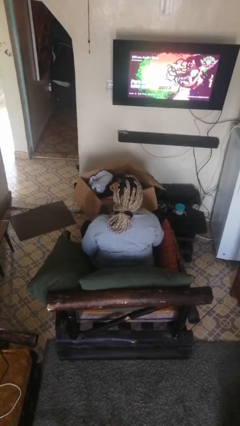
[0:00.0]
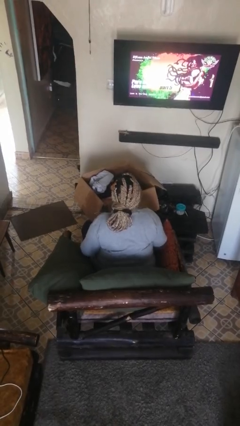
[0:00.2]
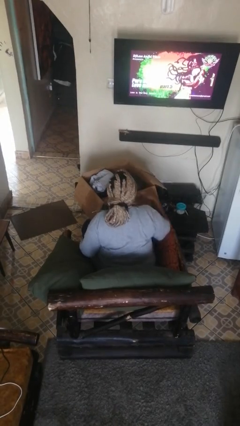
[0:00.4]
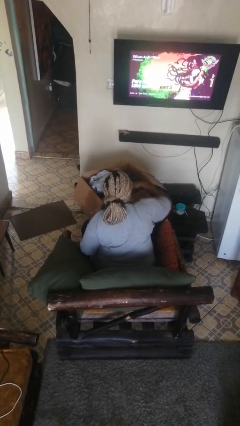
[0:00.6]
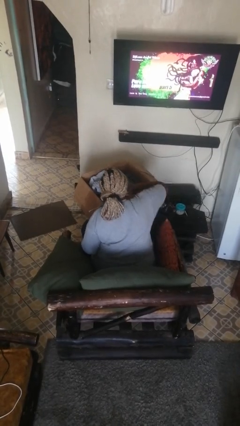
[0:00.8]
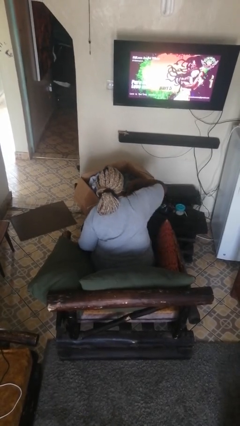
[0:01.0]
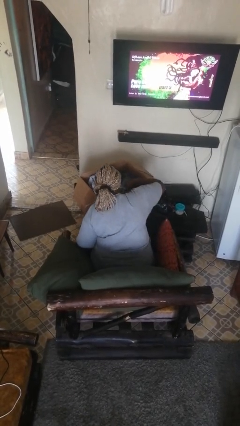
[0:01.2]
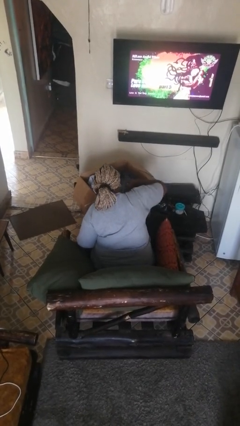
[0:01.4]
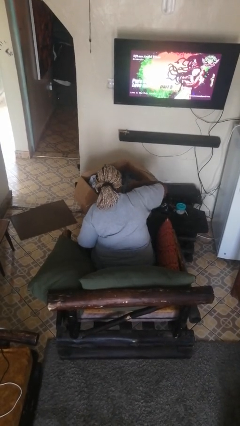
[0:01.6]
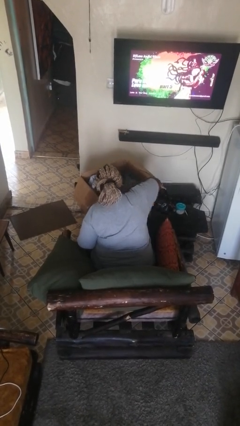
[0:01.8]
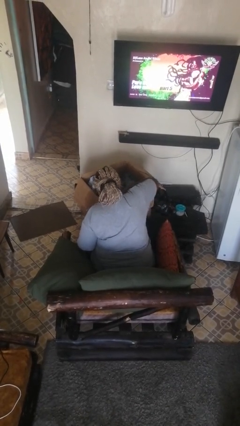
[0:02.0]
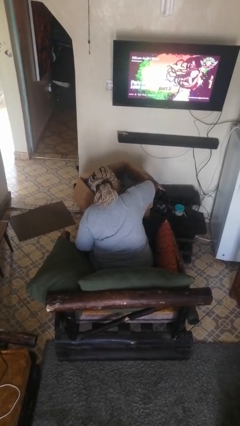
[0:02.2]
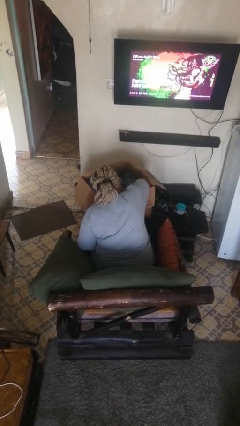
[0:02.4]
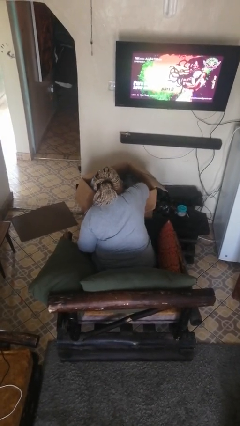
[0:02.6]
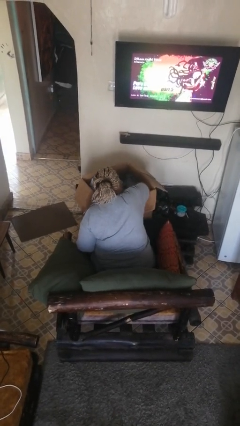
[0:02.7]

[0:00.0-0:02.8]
person searches in box

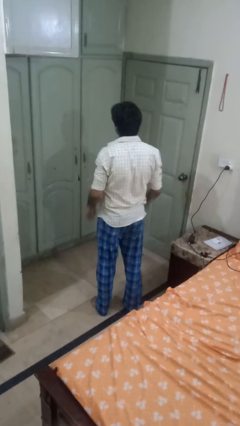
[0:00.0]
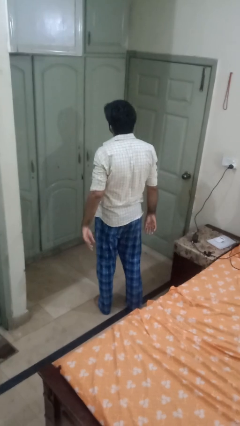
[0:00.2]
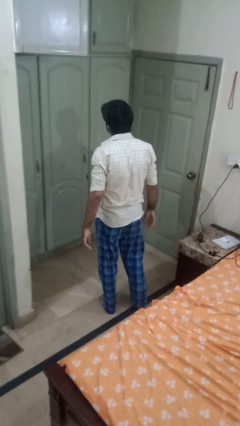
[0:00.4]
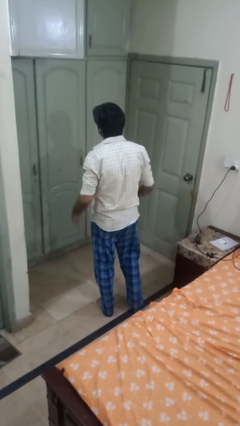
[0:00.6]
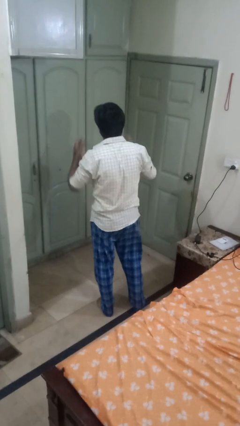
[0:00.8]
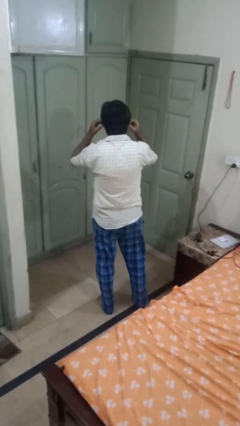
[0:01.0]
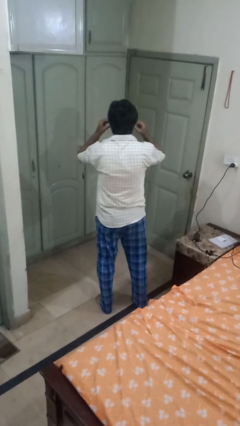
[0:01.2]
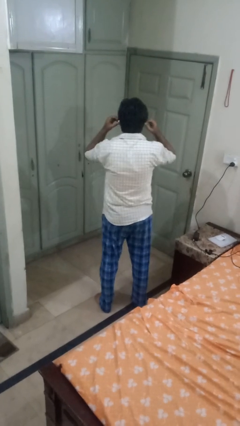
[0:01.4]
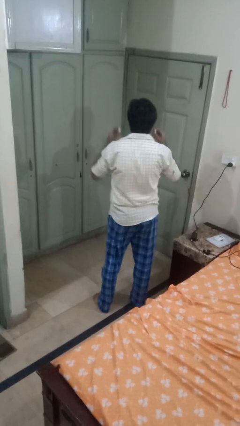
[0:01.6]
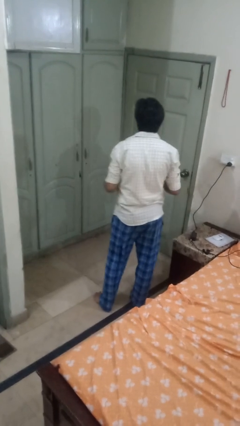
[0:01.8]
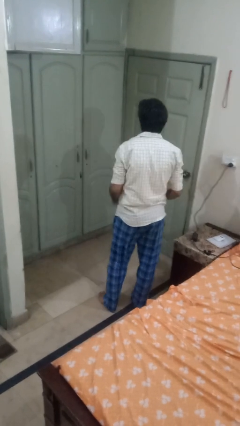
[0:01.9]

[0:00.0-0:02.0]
person takes off headphones

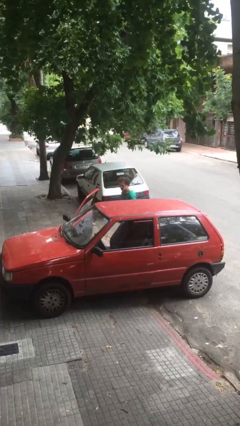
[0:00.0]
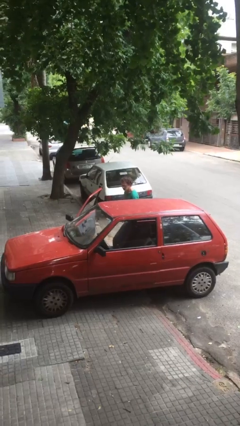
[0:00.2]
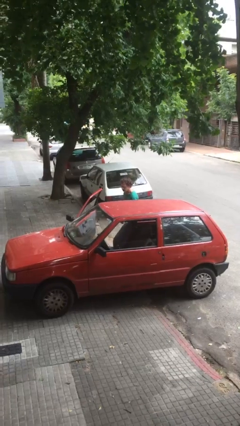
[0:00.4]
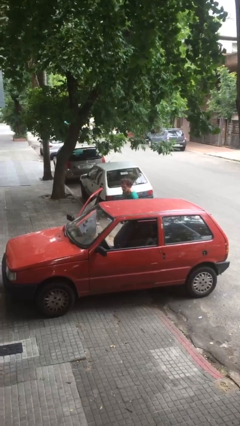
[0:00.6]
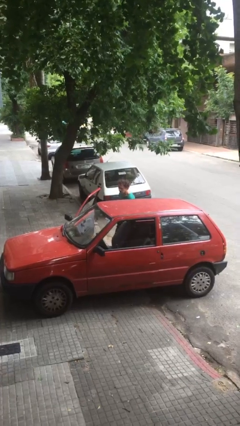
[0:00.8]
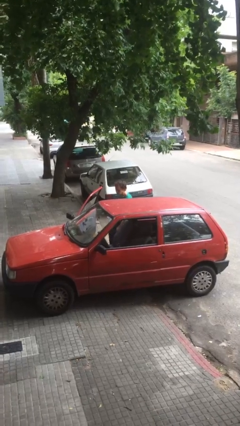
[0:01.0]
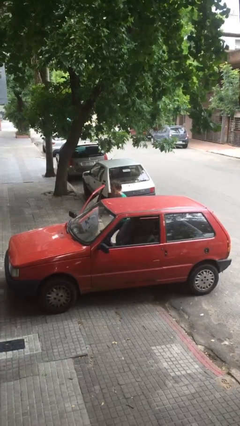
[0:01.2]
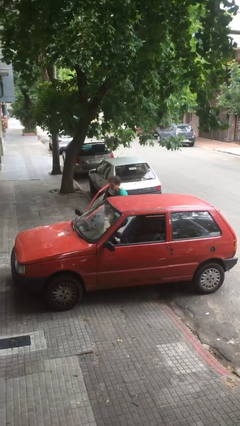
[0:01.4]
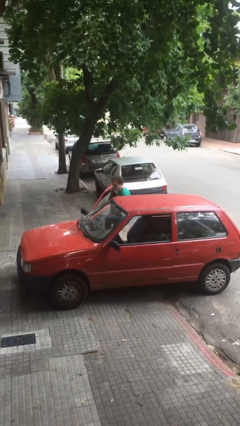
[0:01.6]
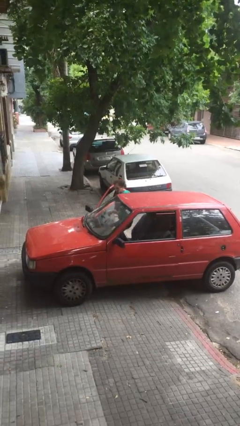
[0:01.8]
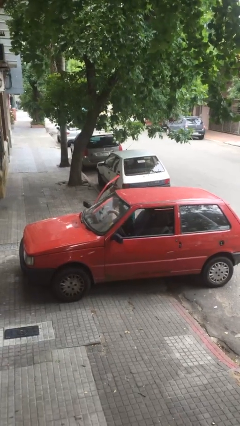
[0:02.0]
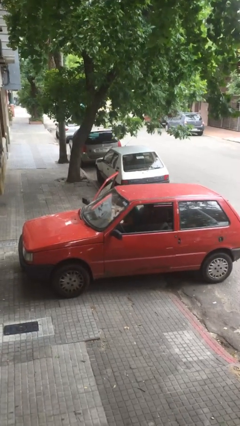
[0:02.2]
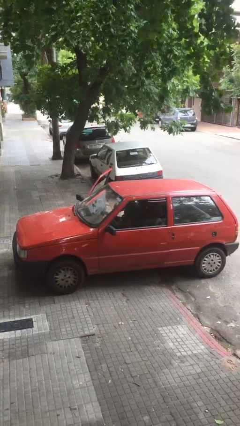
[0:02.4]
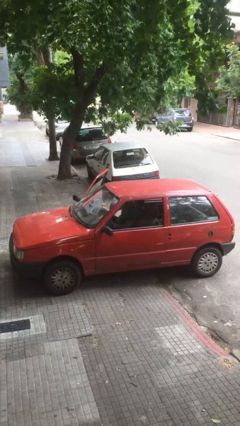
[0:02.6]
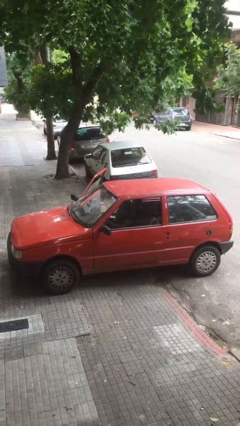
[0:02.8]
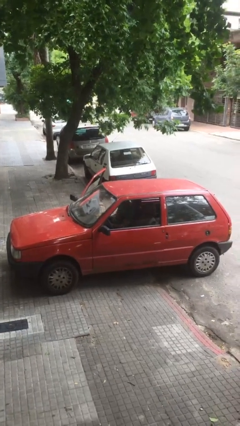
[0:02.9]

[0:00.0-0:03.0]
person enters car

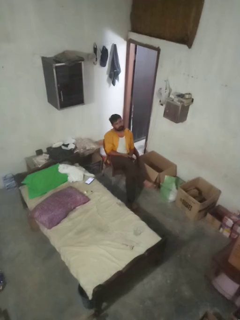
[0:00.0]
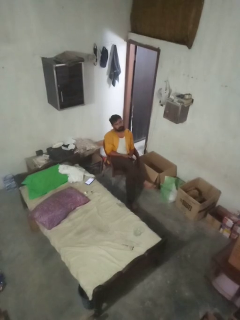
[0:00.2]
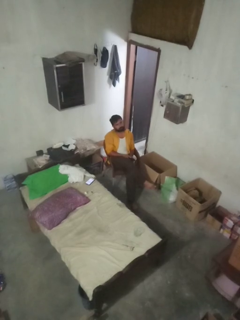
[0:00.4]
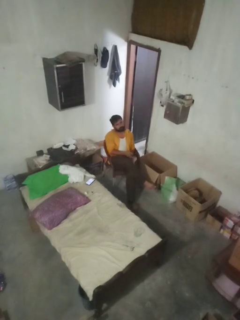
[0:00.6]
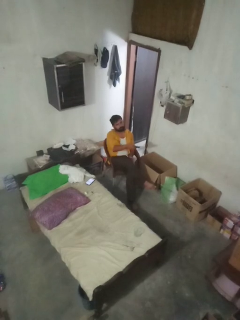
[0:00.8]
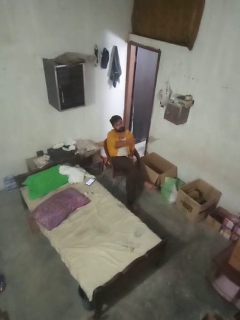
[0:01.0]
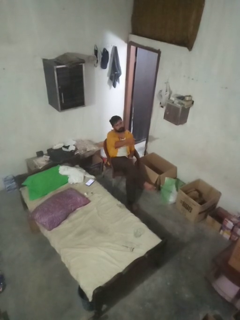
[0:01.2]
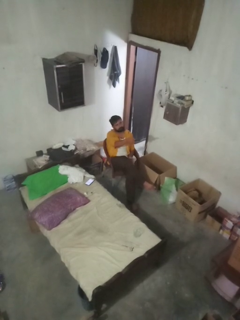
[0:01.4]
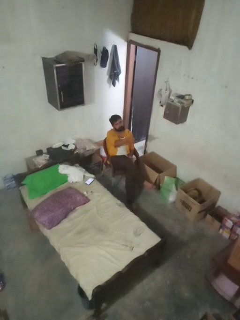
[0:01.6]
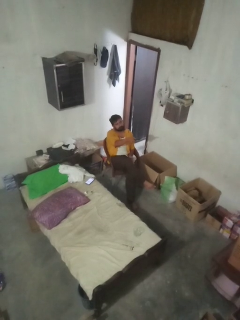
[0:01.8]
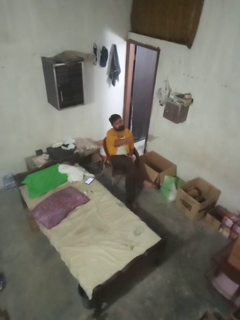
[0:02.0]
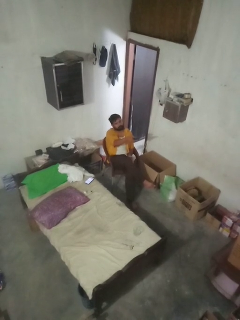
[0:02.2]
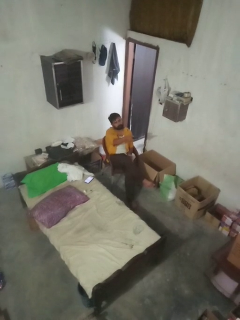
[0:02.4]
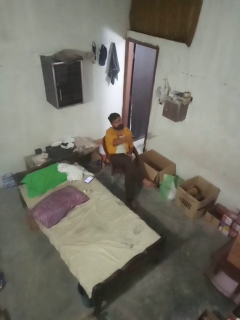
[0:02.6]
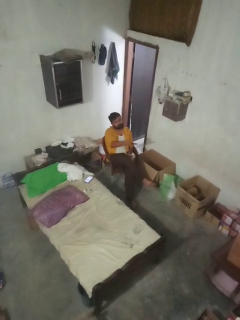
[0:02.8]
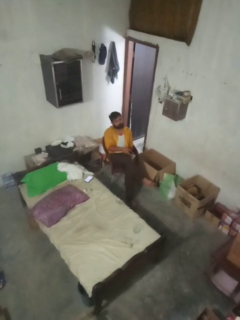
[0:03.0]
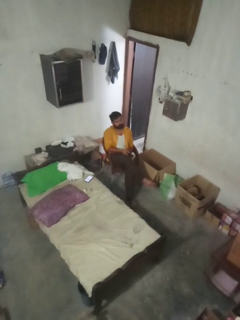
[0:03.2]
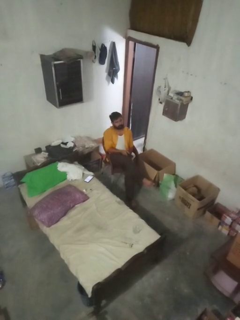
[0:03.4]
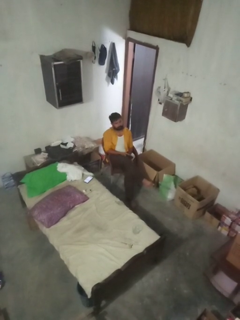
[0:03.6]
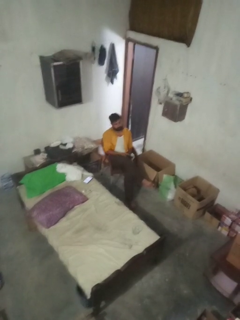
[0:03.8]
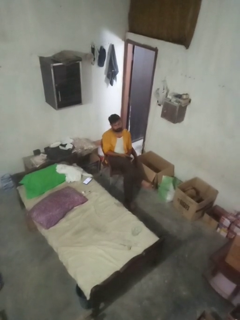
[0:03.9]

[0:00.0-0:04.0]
person uses television remote

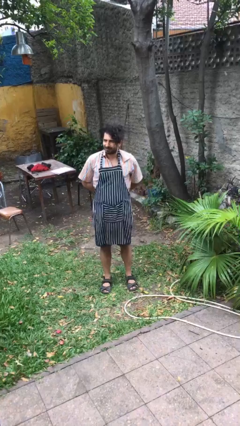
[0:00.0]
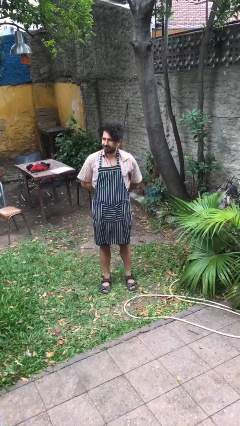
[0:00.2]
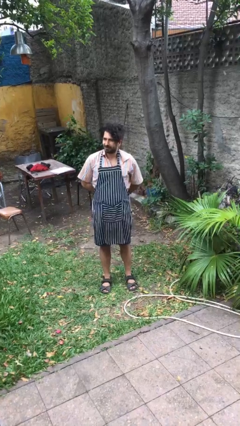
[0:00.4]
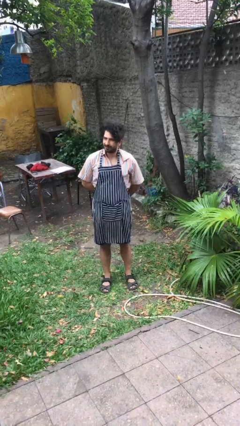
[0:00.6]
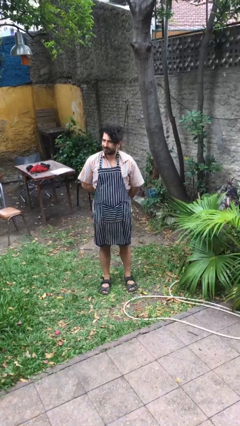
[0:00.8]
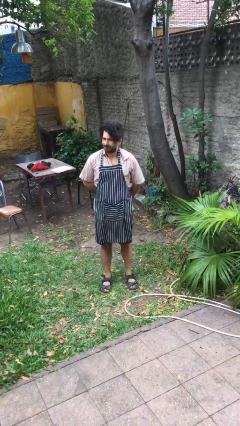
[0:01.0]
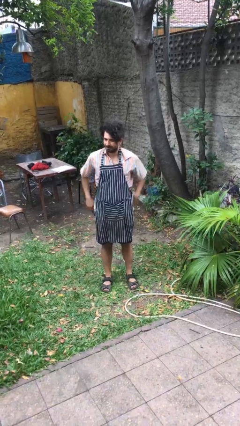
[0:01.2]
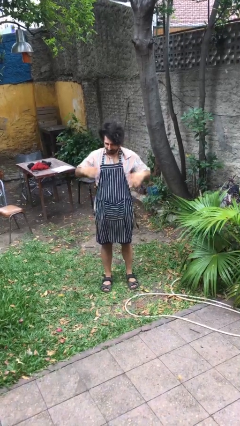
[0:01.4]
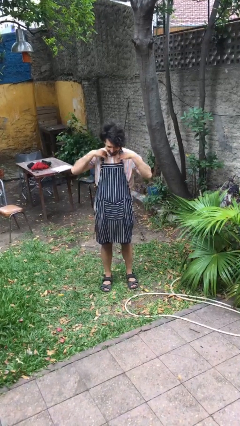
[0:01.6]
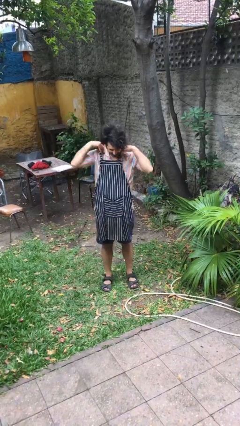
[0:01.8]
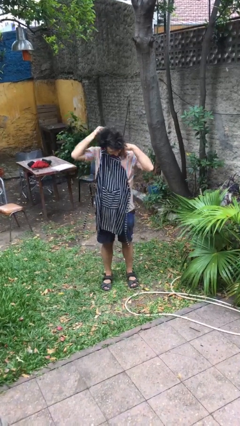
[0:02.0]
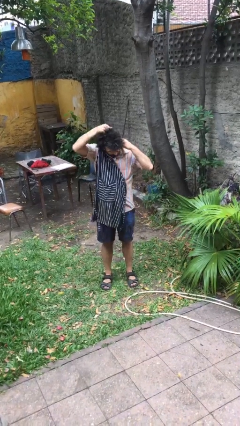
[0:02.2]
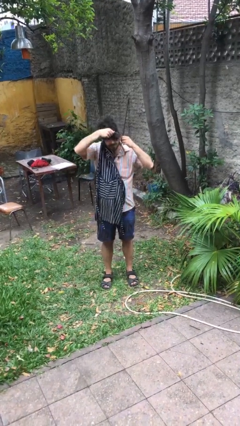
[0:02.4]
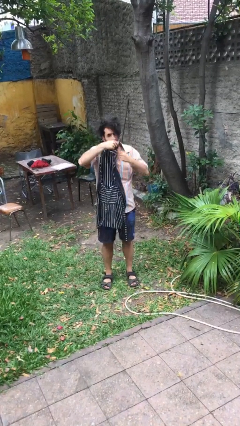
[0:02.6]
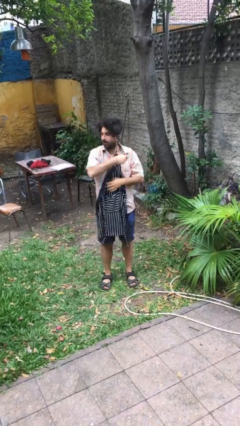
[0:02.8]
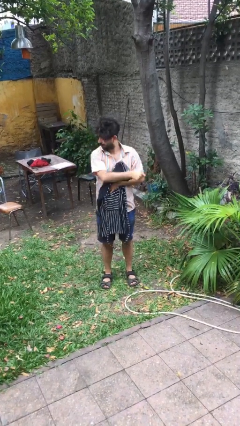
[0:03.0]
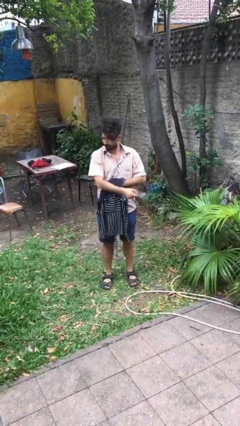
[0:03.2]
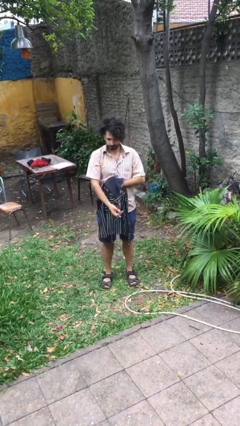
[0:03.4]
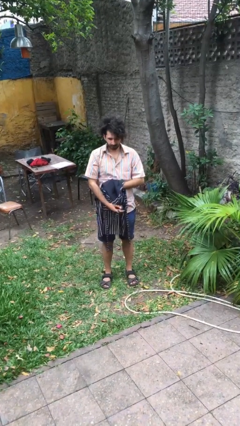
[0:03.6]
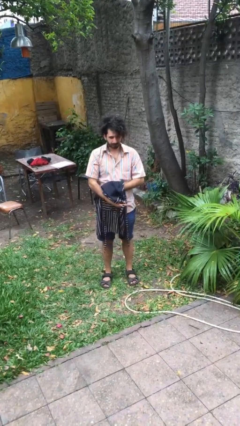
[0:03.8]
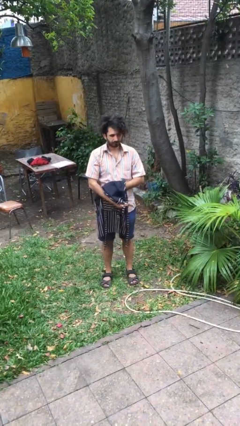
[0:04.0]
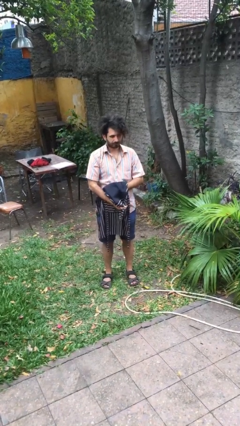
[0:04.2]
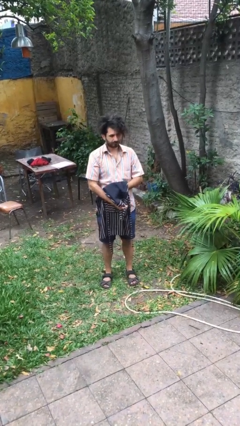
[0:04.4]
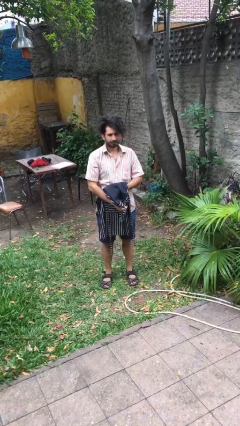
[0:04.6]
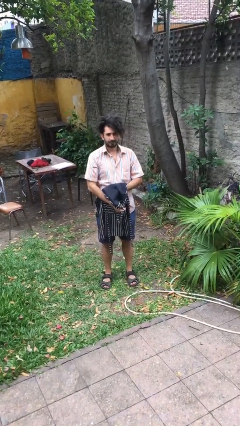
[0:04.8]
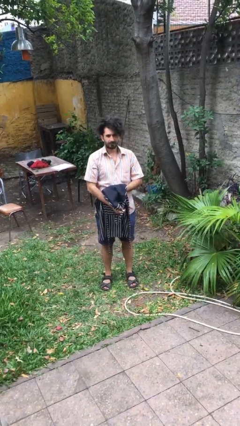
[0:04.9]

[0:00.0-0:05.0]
person takes off apron

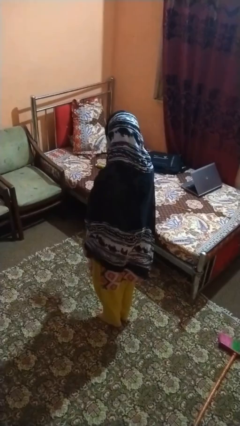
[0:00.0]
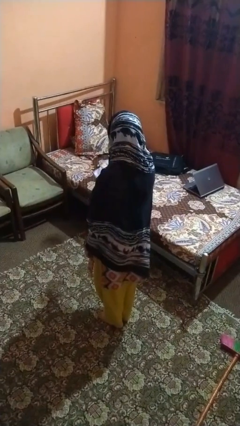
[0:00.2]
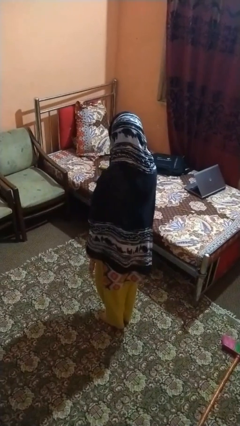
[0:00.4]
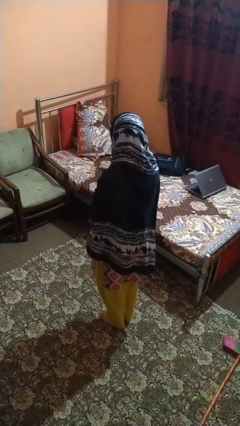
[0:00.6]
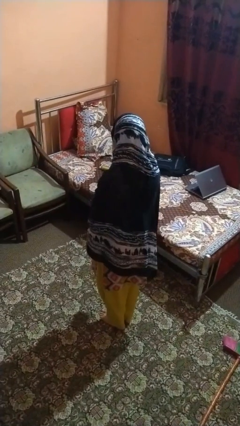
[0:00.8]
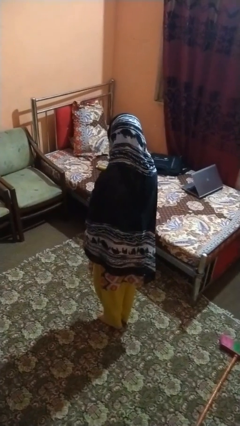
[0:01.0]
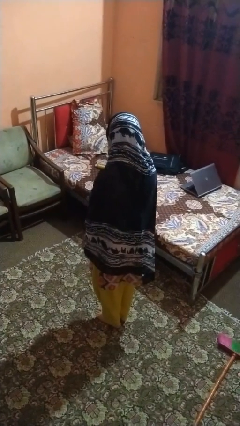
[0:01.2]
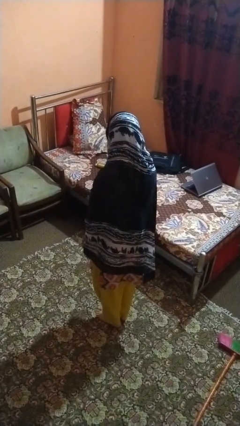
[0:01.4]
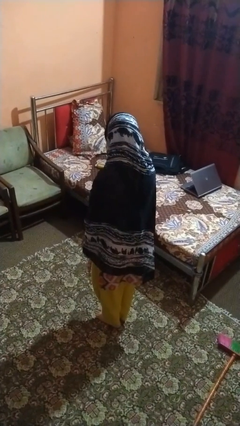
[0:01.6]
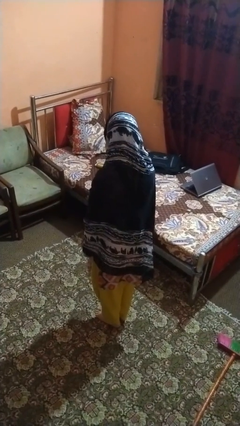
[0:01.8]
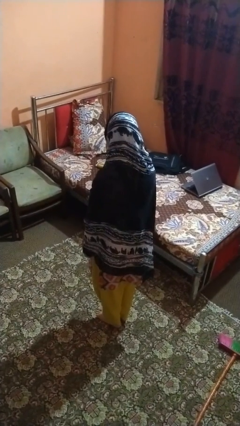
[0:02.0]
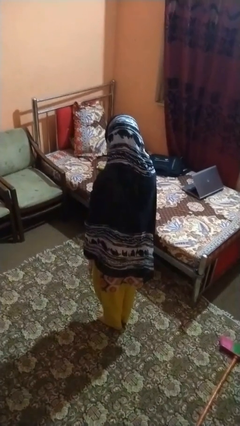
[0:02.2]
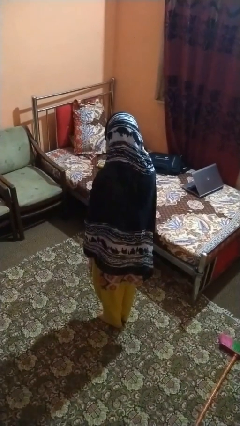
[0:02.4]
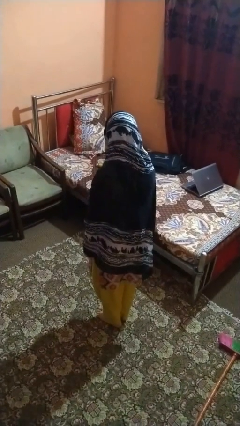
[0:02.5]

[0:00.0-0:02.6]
person throws object on bed
